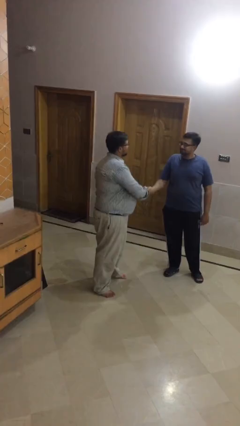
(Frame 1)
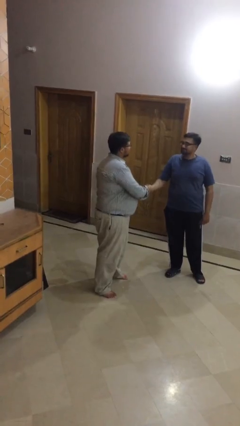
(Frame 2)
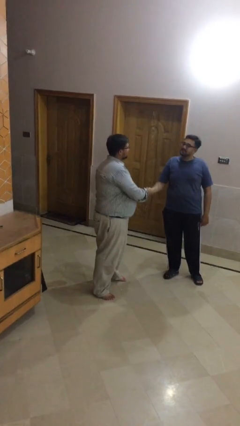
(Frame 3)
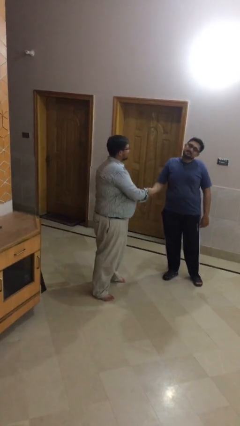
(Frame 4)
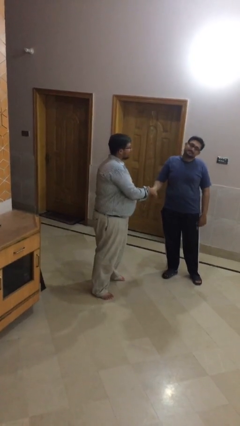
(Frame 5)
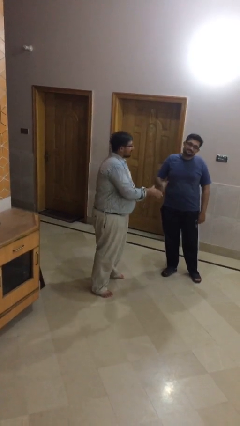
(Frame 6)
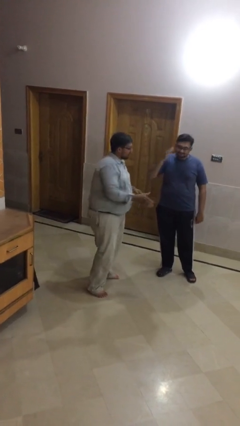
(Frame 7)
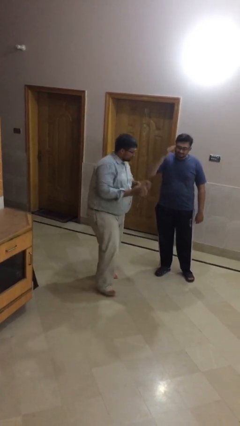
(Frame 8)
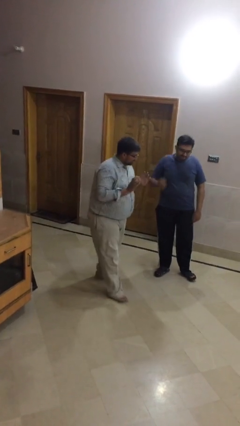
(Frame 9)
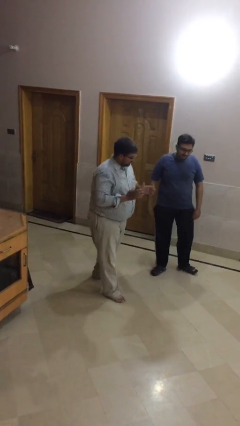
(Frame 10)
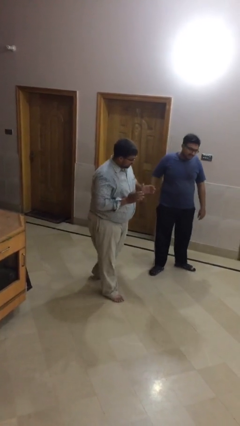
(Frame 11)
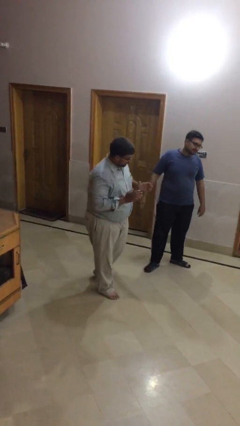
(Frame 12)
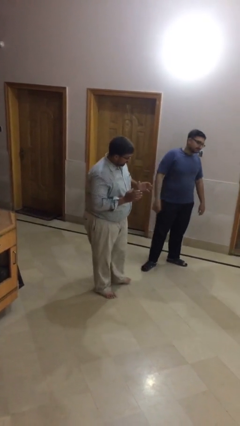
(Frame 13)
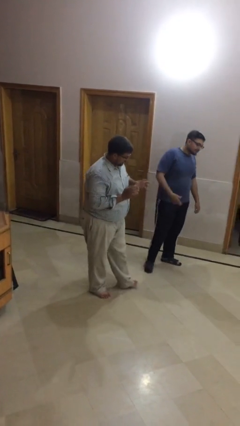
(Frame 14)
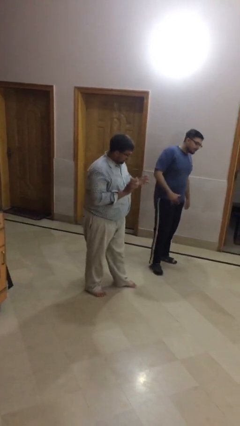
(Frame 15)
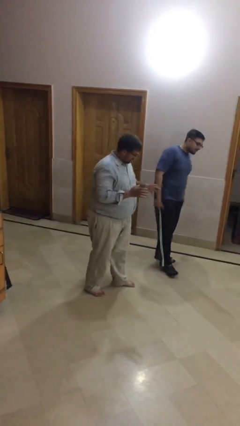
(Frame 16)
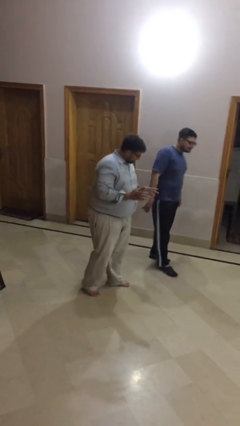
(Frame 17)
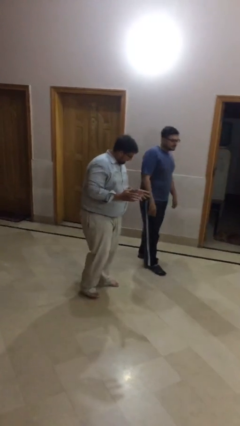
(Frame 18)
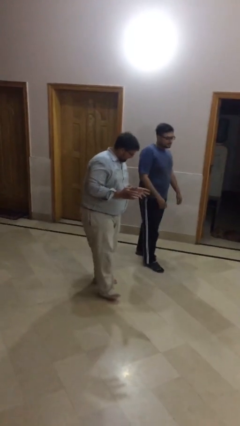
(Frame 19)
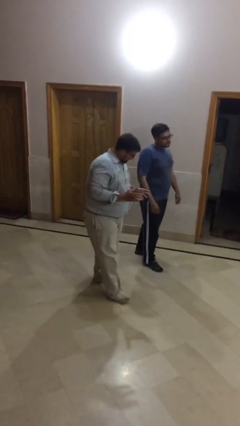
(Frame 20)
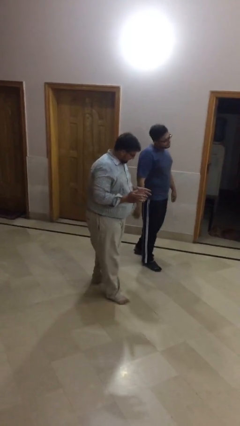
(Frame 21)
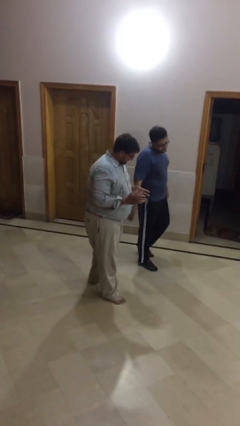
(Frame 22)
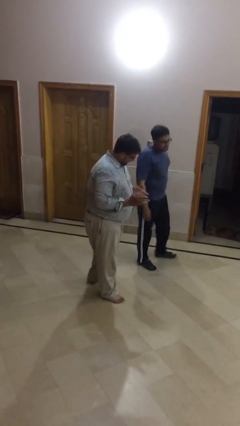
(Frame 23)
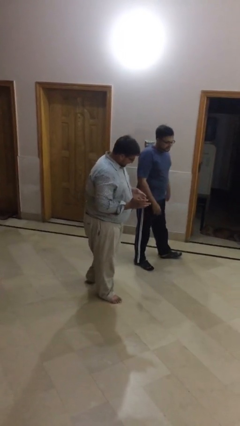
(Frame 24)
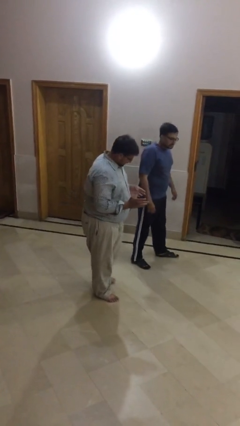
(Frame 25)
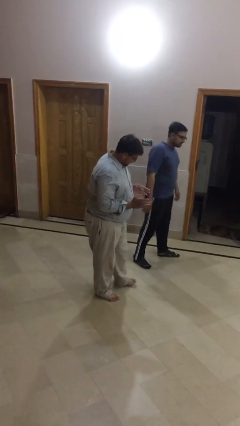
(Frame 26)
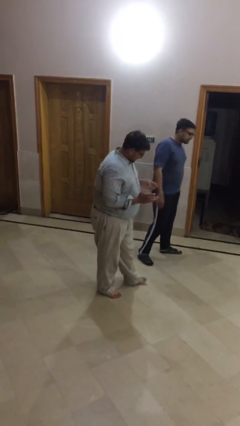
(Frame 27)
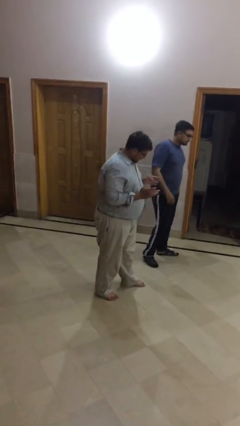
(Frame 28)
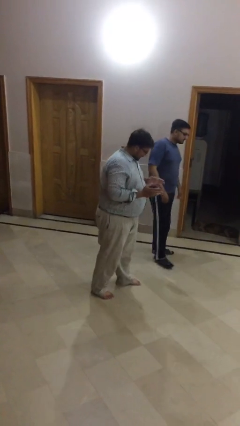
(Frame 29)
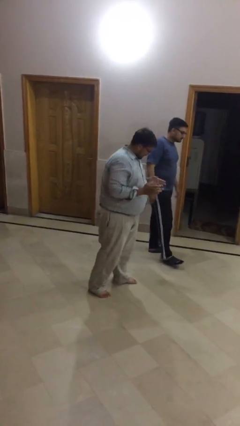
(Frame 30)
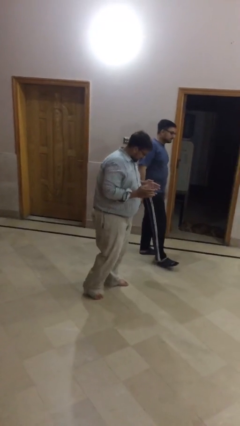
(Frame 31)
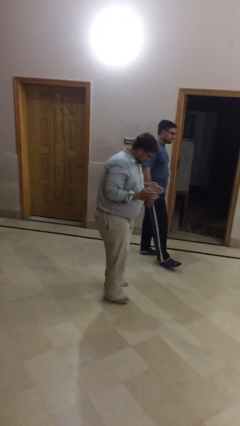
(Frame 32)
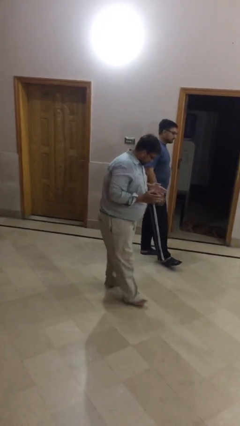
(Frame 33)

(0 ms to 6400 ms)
person talks to person

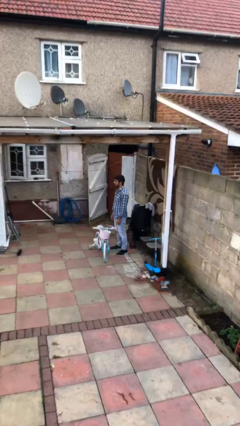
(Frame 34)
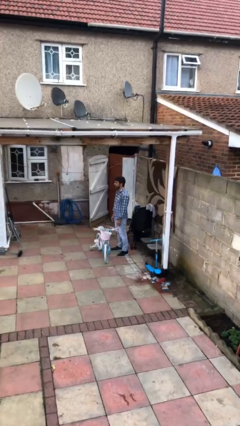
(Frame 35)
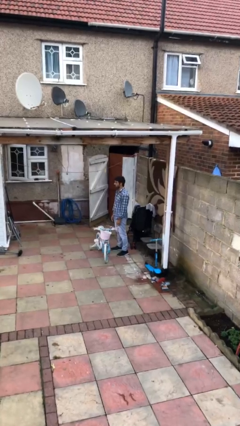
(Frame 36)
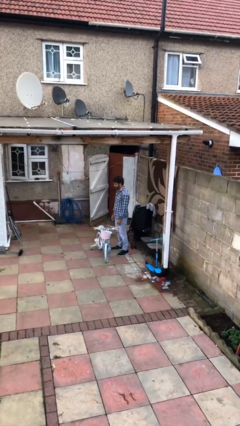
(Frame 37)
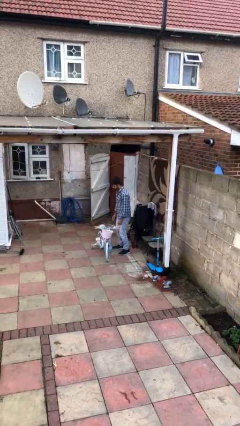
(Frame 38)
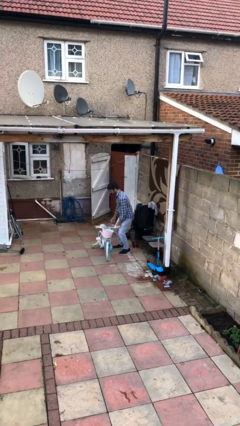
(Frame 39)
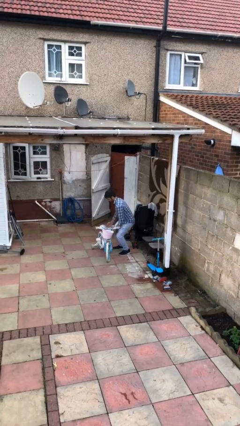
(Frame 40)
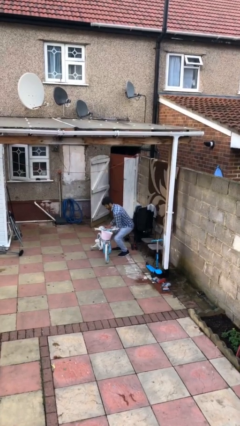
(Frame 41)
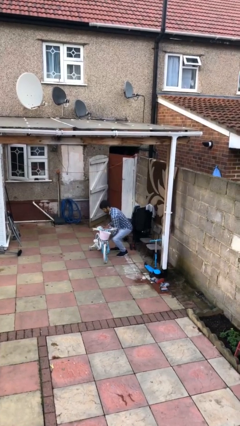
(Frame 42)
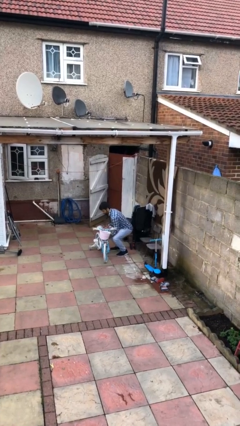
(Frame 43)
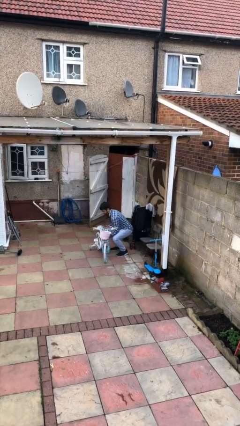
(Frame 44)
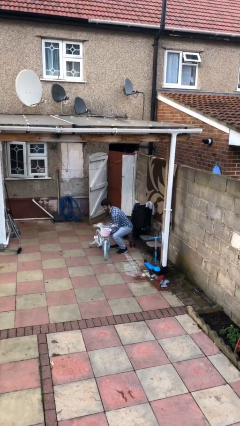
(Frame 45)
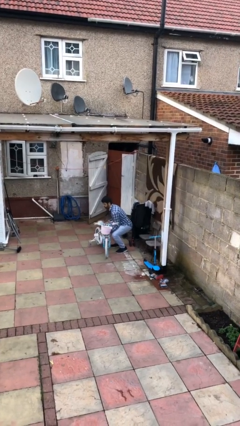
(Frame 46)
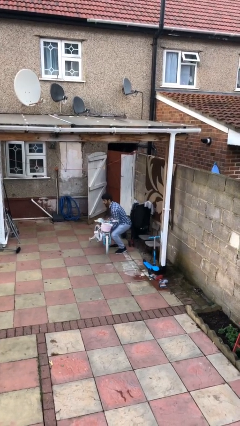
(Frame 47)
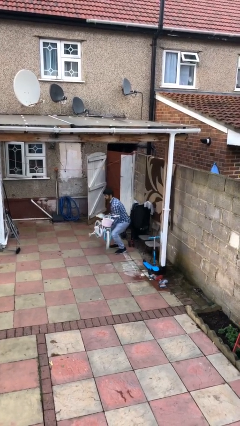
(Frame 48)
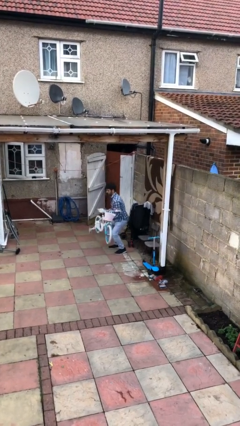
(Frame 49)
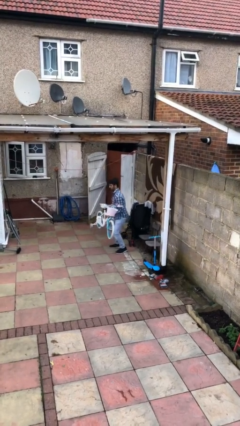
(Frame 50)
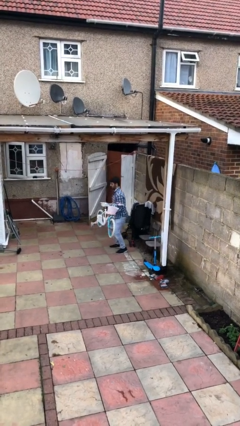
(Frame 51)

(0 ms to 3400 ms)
person picks up object from floor

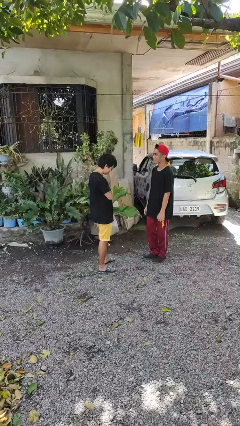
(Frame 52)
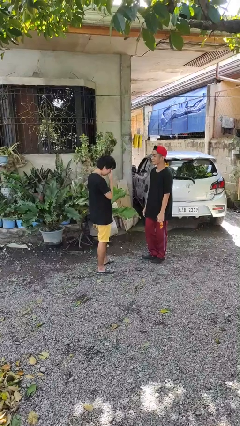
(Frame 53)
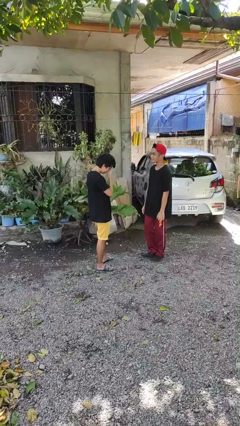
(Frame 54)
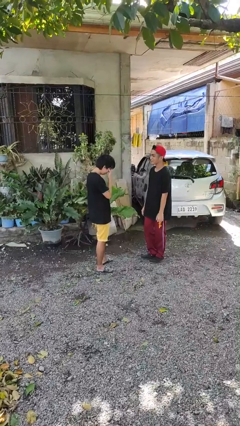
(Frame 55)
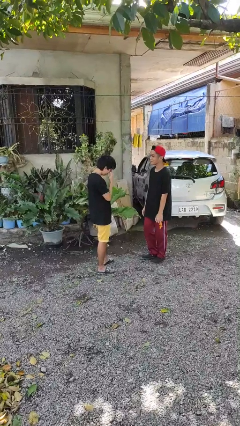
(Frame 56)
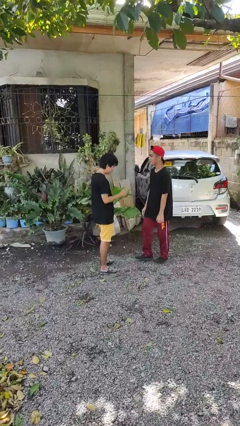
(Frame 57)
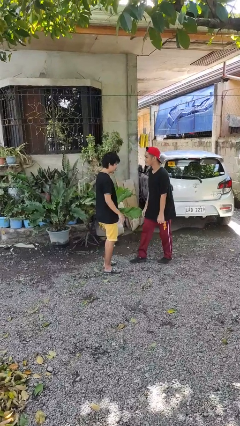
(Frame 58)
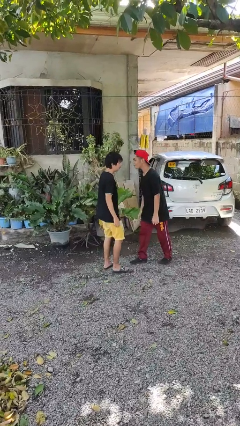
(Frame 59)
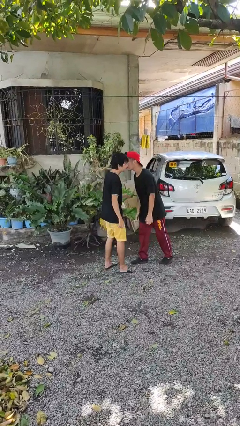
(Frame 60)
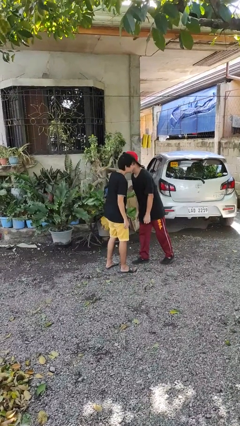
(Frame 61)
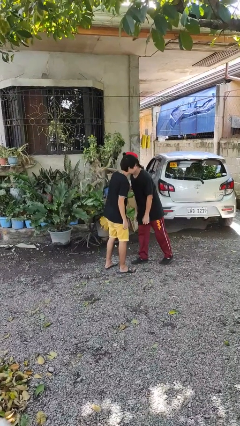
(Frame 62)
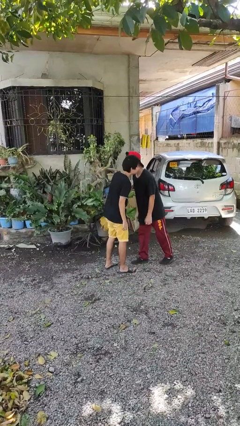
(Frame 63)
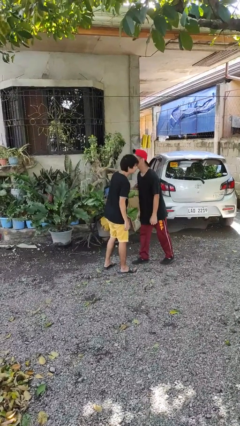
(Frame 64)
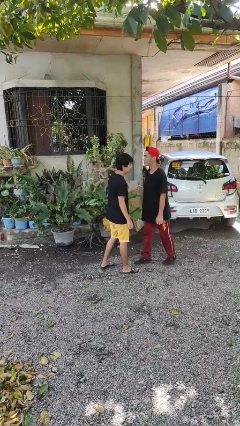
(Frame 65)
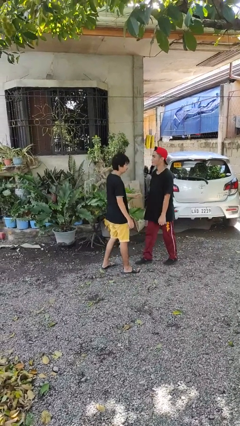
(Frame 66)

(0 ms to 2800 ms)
person kisses cheek of person

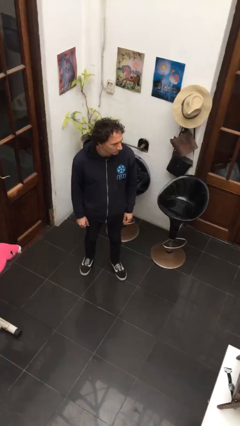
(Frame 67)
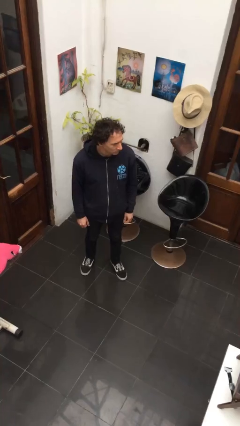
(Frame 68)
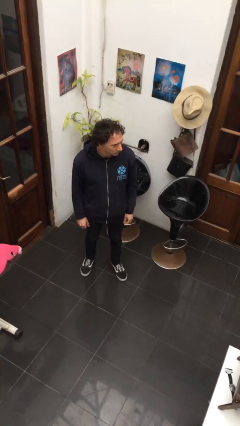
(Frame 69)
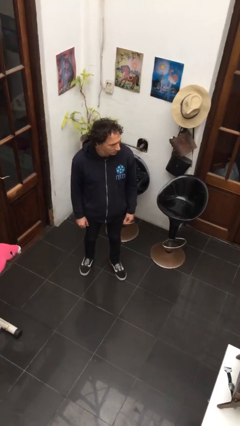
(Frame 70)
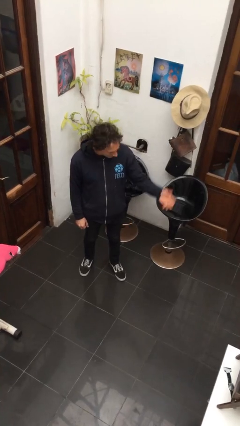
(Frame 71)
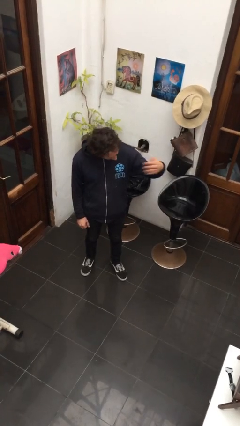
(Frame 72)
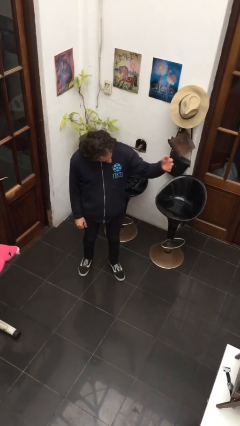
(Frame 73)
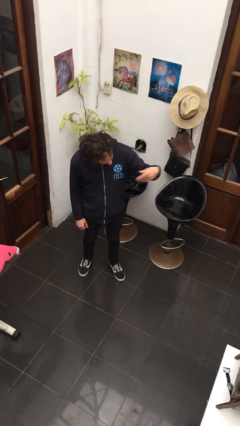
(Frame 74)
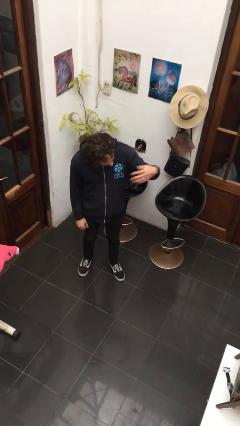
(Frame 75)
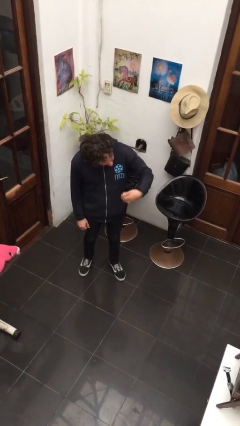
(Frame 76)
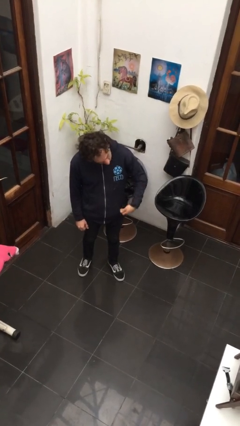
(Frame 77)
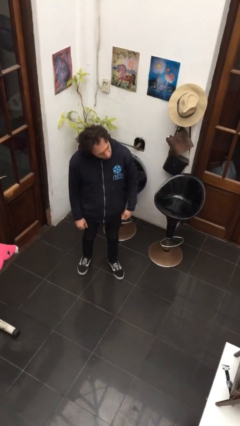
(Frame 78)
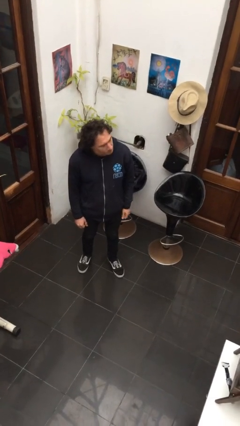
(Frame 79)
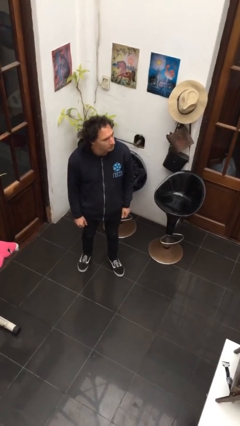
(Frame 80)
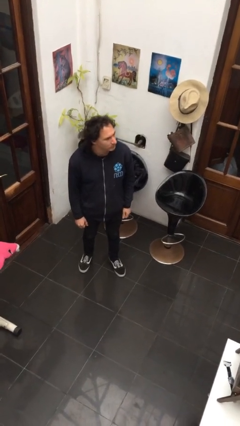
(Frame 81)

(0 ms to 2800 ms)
person gestures come here

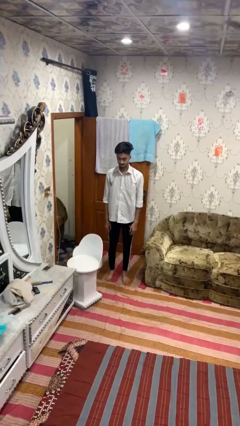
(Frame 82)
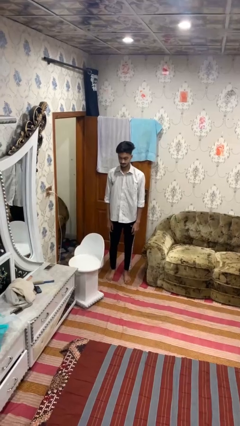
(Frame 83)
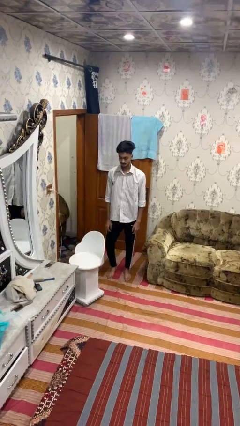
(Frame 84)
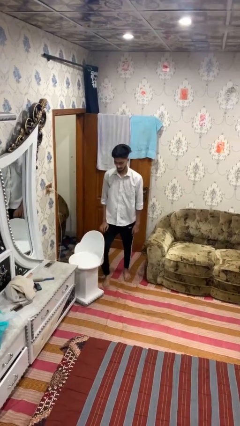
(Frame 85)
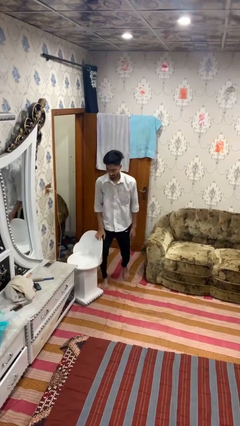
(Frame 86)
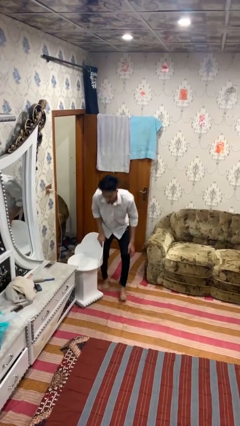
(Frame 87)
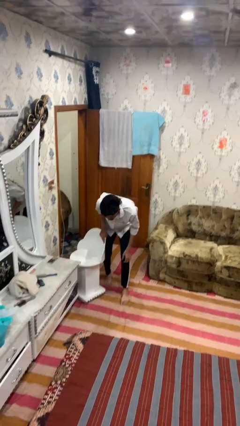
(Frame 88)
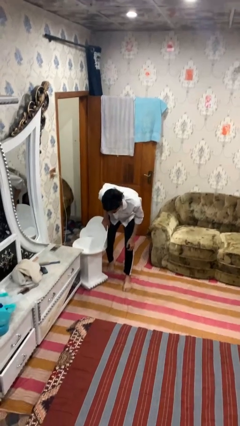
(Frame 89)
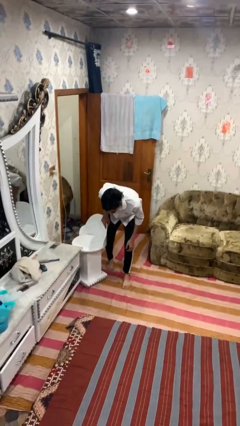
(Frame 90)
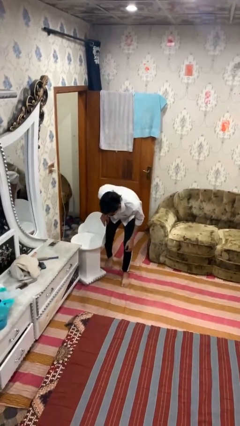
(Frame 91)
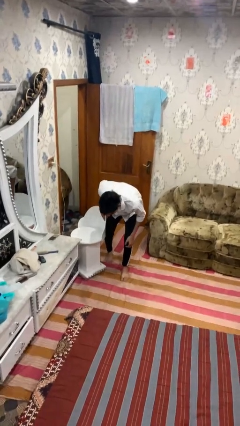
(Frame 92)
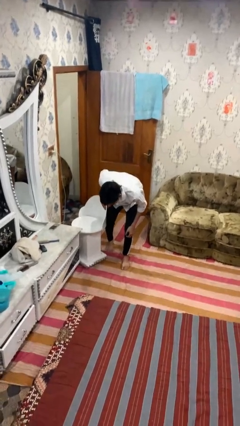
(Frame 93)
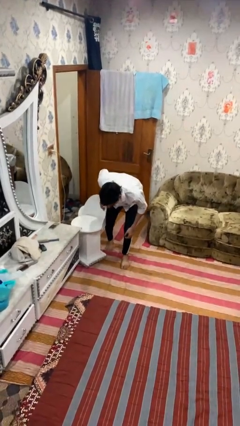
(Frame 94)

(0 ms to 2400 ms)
person trips on object on floor
